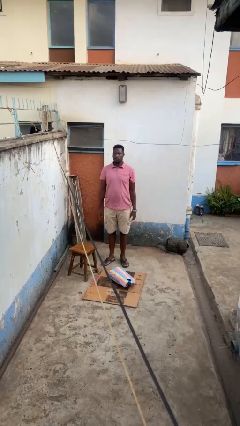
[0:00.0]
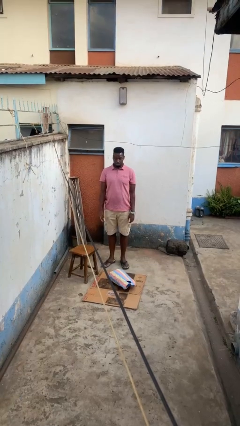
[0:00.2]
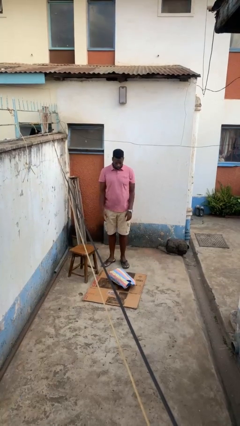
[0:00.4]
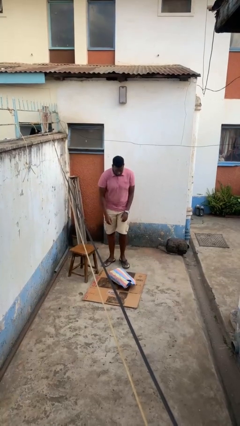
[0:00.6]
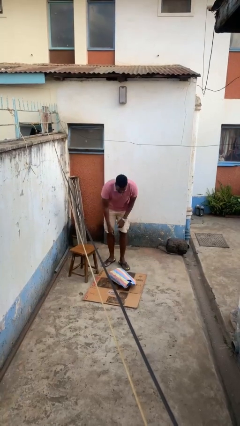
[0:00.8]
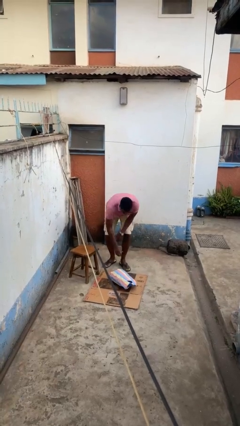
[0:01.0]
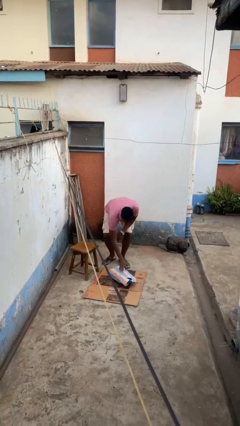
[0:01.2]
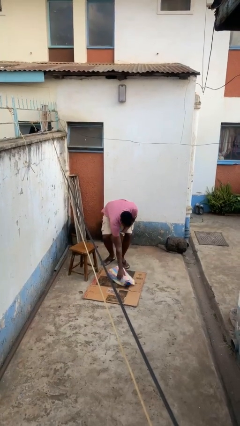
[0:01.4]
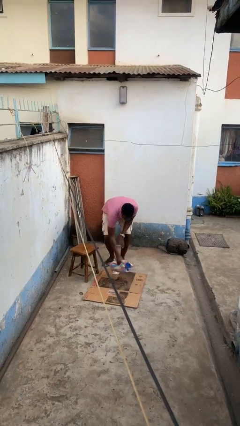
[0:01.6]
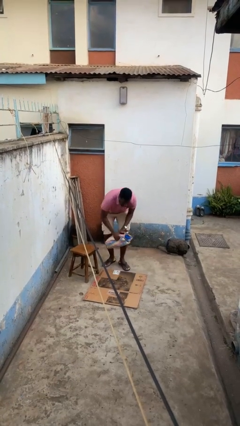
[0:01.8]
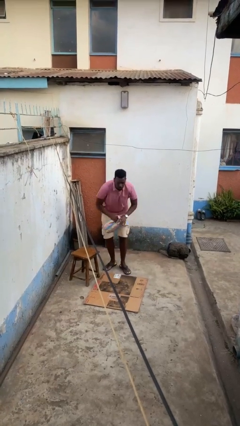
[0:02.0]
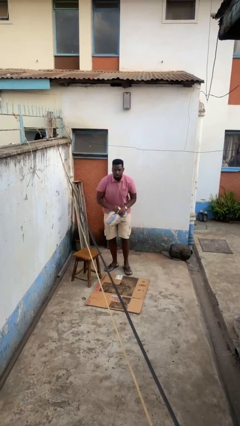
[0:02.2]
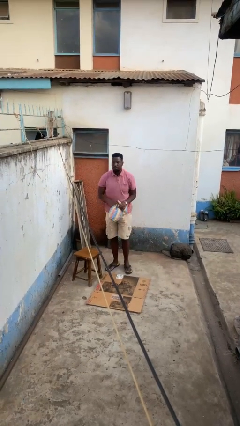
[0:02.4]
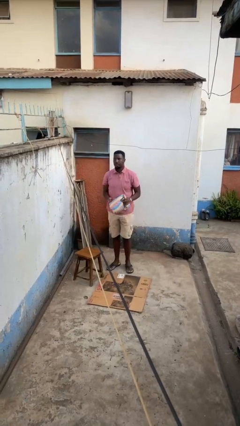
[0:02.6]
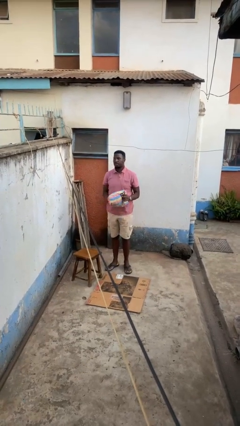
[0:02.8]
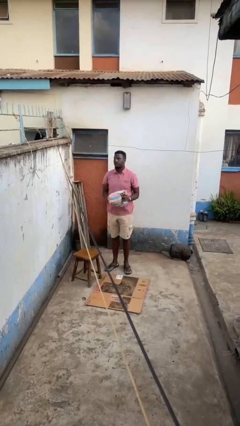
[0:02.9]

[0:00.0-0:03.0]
person picks up object from floor

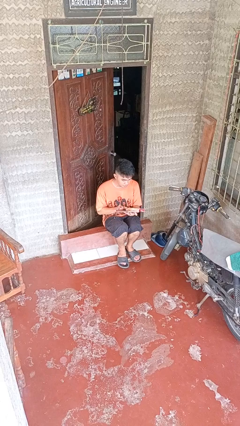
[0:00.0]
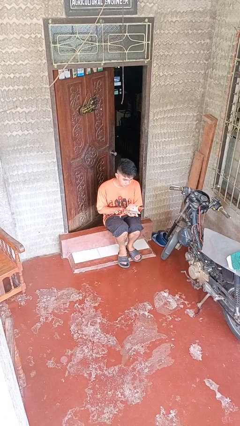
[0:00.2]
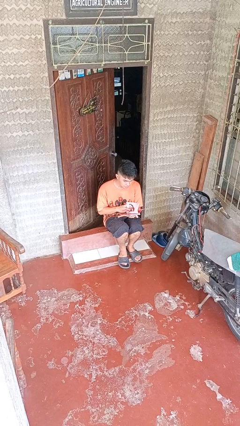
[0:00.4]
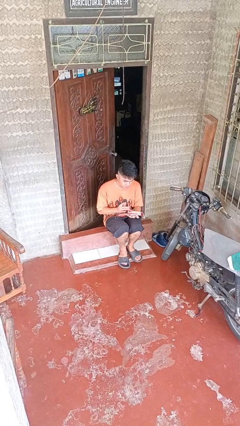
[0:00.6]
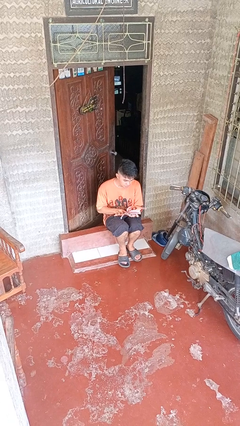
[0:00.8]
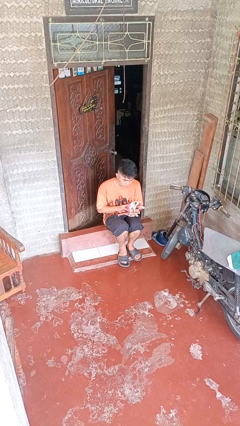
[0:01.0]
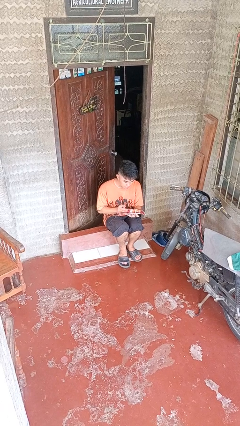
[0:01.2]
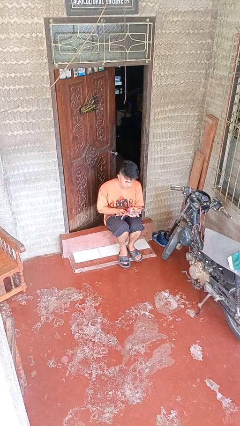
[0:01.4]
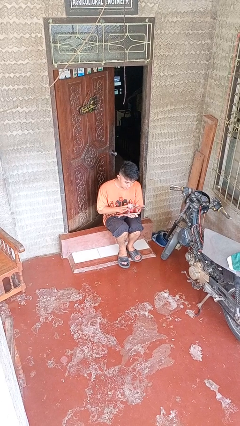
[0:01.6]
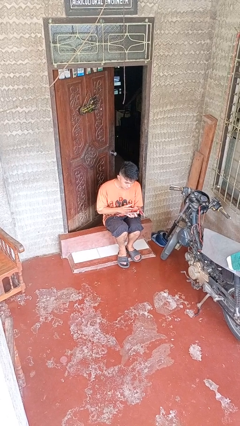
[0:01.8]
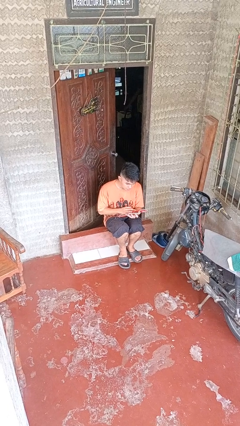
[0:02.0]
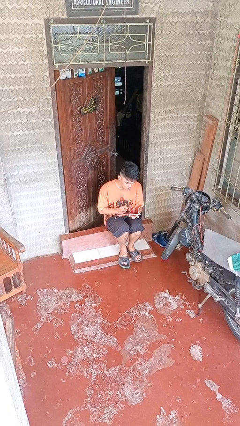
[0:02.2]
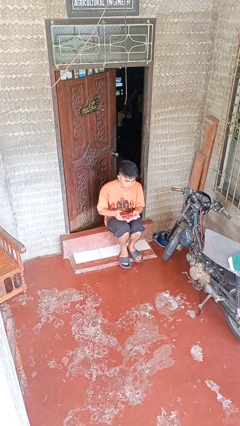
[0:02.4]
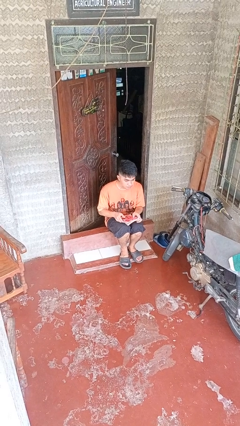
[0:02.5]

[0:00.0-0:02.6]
person reads magazine

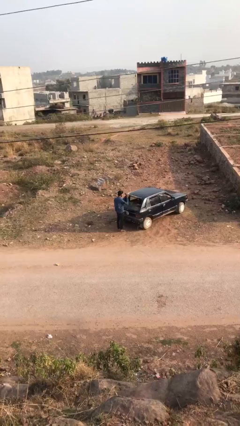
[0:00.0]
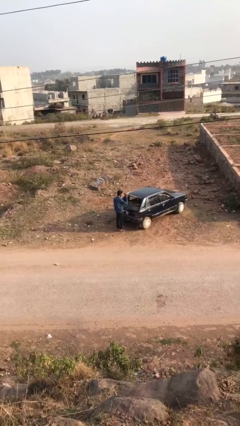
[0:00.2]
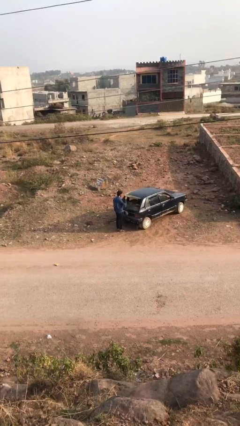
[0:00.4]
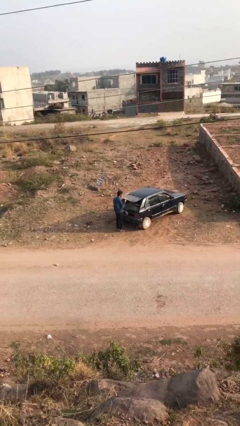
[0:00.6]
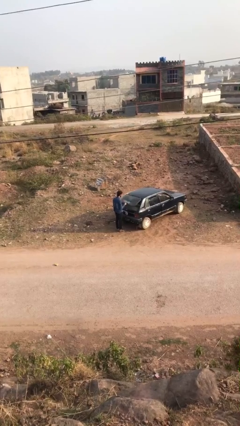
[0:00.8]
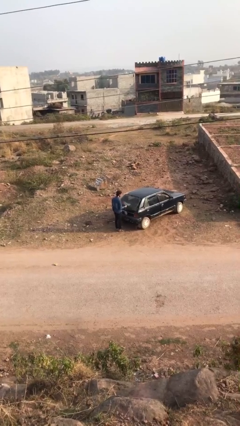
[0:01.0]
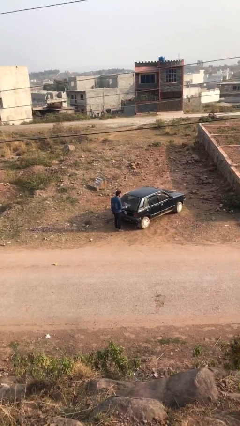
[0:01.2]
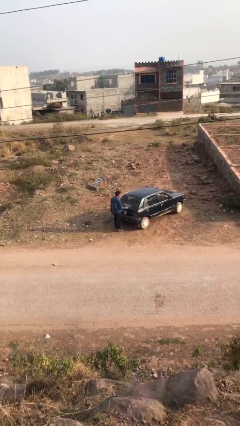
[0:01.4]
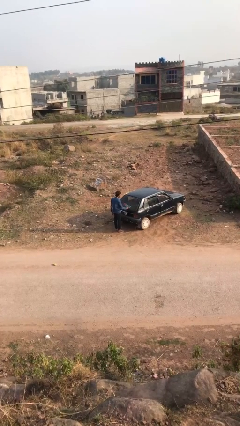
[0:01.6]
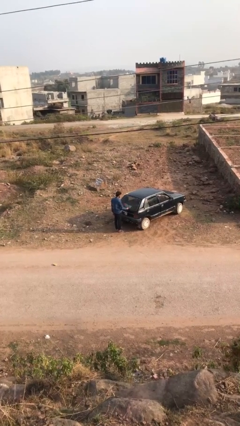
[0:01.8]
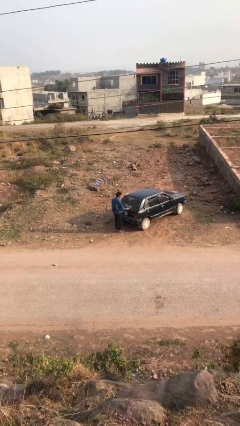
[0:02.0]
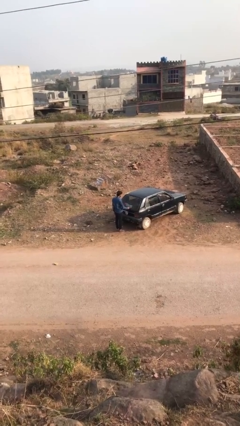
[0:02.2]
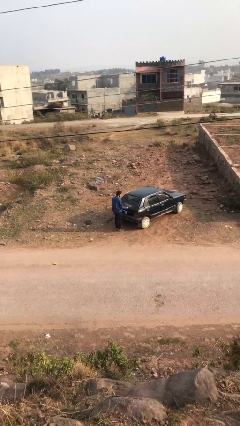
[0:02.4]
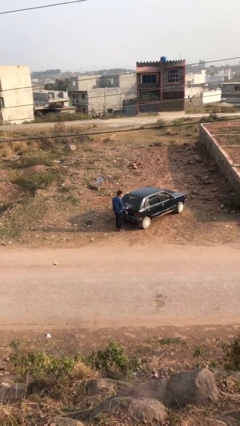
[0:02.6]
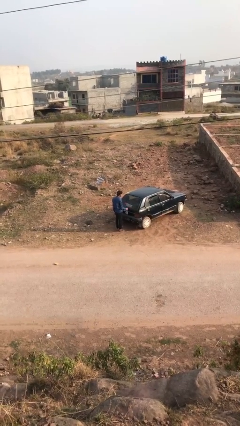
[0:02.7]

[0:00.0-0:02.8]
person closes car trunk

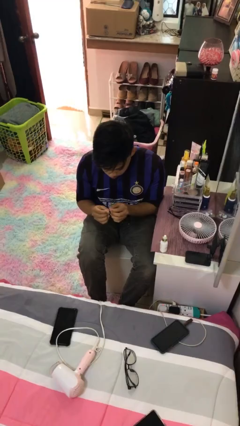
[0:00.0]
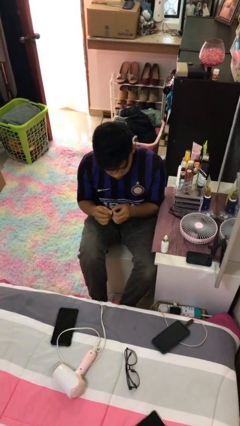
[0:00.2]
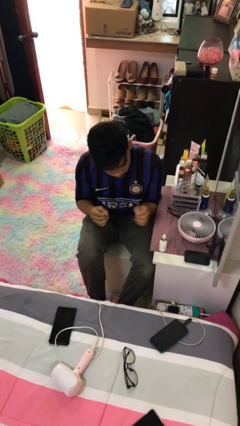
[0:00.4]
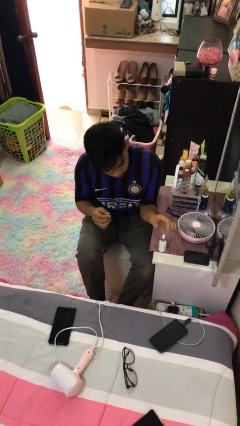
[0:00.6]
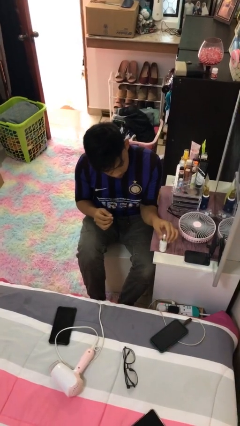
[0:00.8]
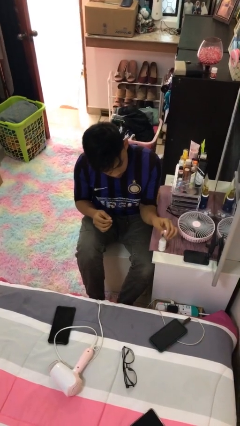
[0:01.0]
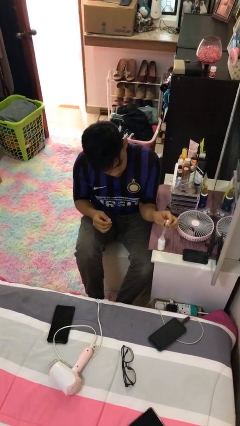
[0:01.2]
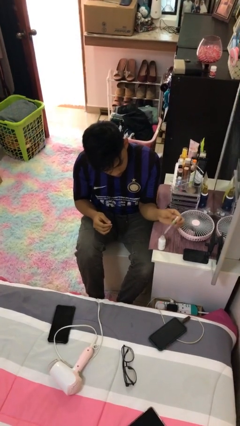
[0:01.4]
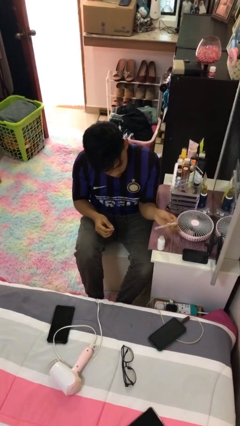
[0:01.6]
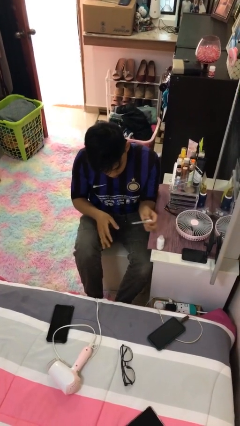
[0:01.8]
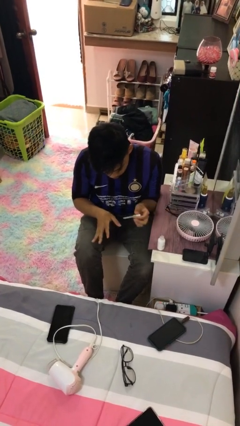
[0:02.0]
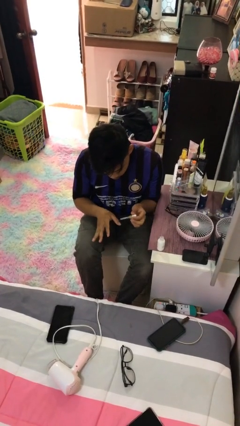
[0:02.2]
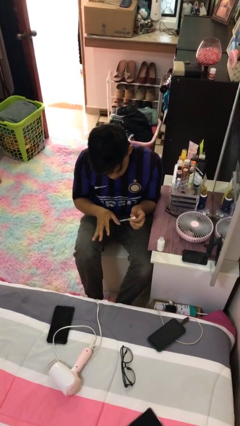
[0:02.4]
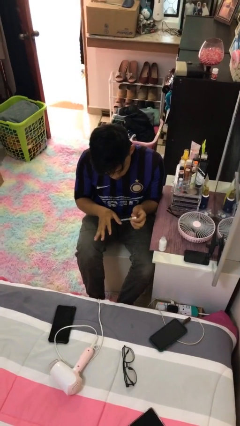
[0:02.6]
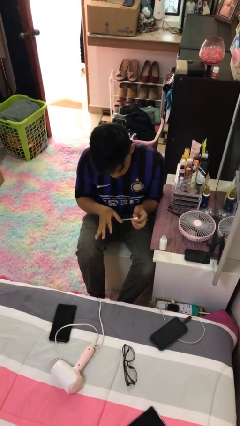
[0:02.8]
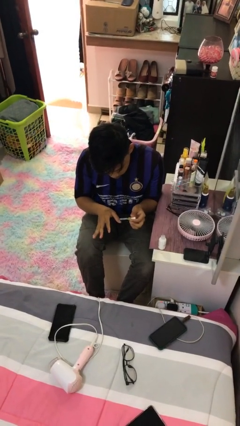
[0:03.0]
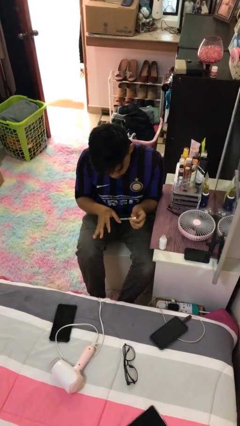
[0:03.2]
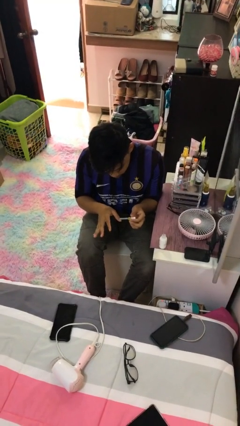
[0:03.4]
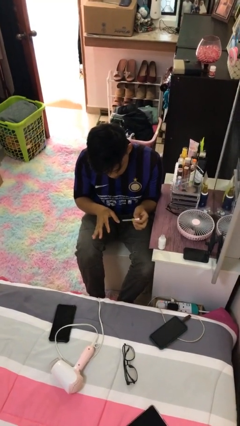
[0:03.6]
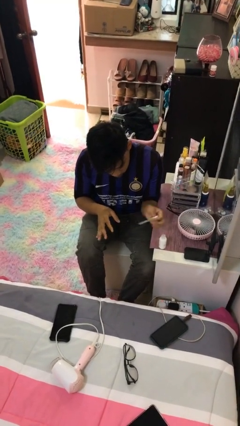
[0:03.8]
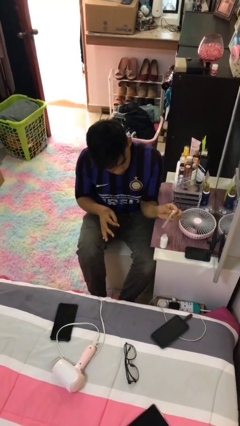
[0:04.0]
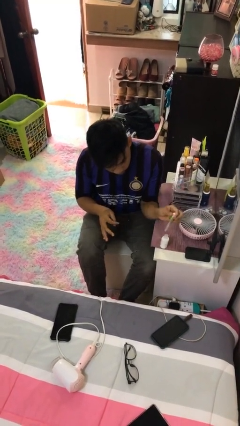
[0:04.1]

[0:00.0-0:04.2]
person paints fingernails

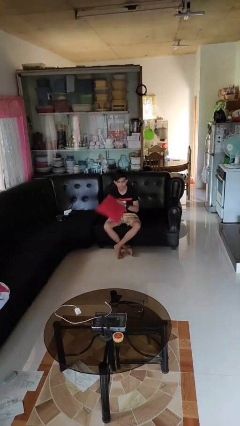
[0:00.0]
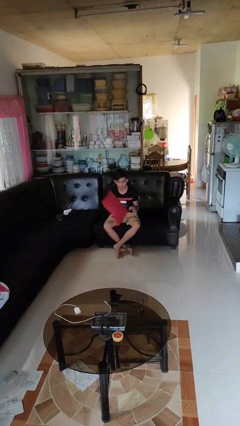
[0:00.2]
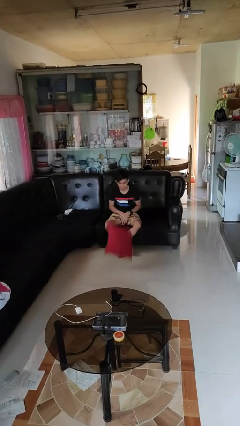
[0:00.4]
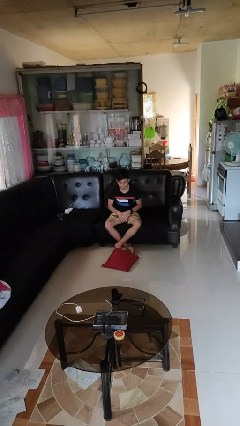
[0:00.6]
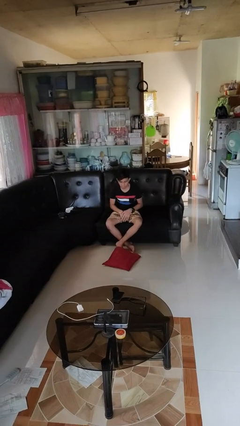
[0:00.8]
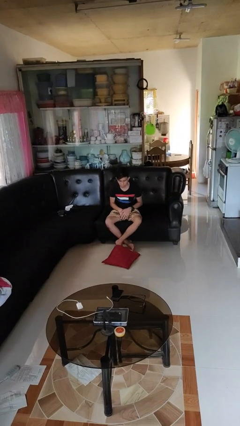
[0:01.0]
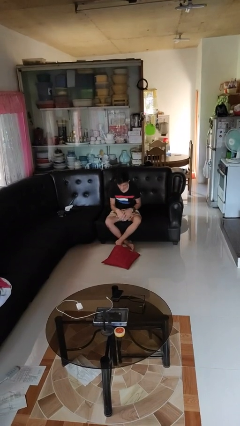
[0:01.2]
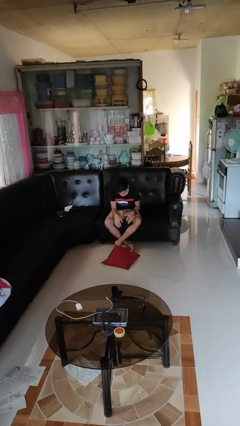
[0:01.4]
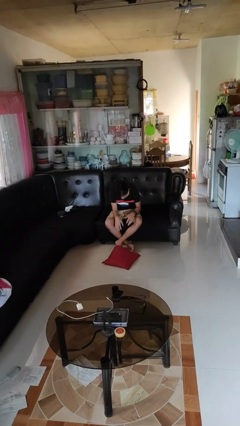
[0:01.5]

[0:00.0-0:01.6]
person drops object

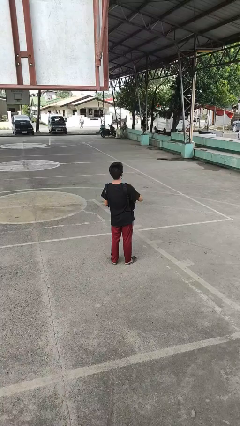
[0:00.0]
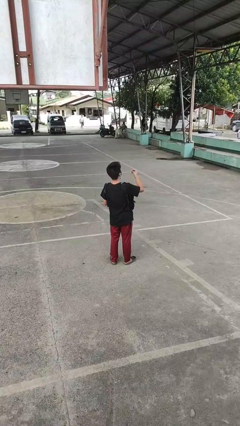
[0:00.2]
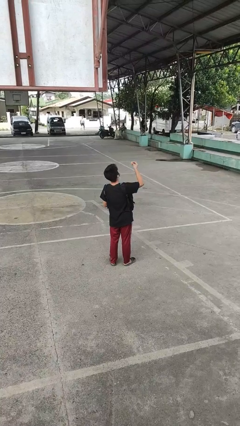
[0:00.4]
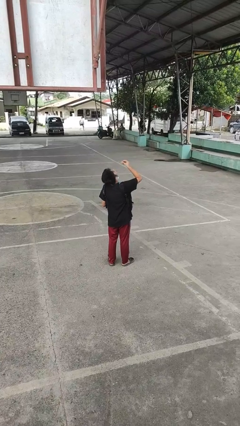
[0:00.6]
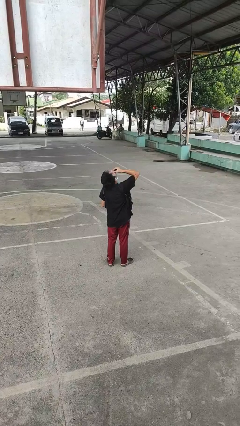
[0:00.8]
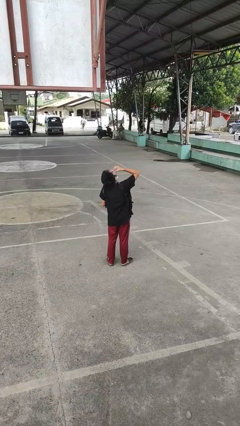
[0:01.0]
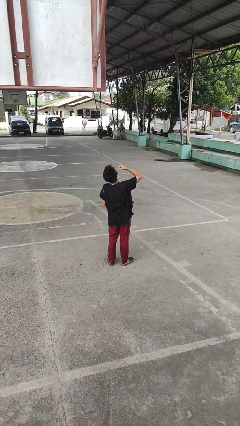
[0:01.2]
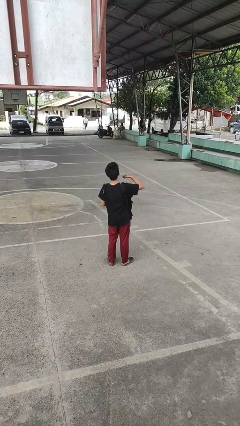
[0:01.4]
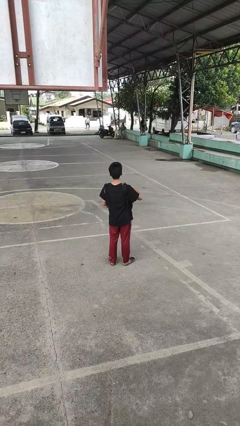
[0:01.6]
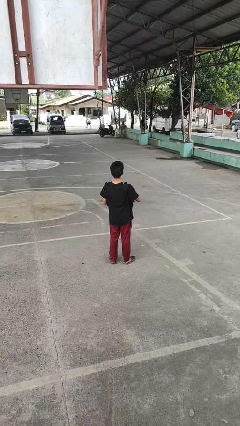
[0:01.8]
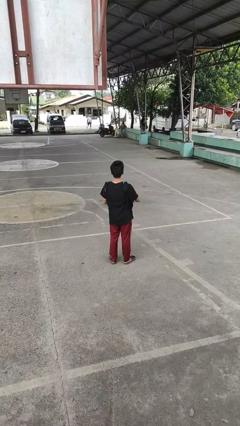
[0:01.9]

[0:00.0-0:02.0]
person eats snack from bag

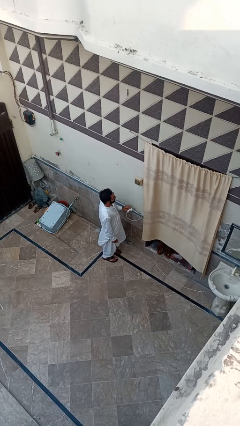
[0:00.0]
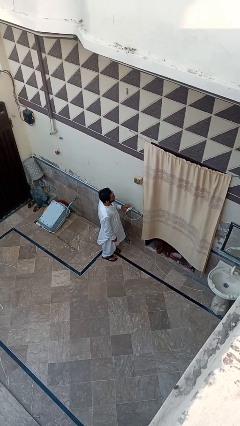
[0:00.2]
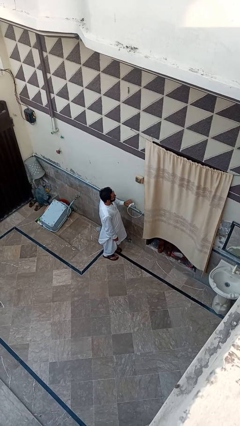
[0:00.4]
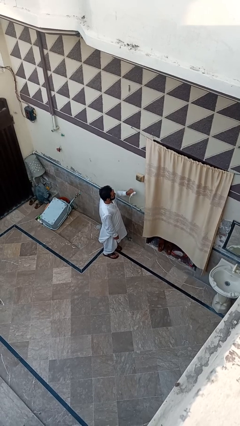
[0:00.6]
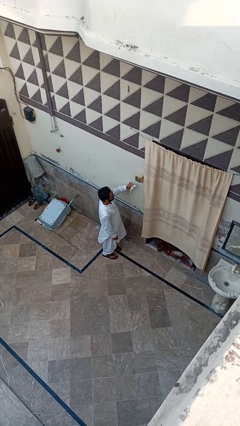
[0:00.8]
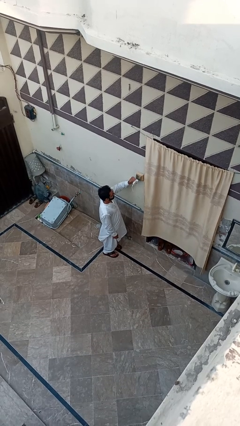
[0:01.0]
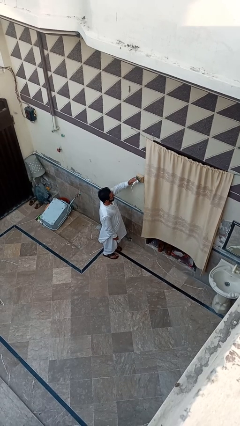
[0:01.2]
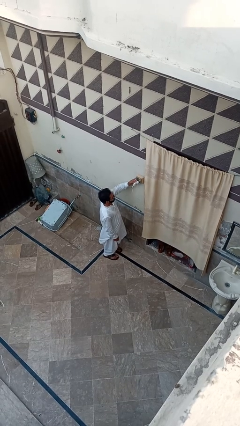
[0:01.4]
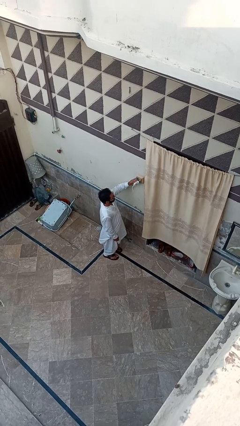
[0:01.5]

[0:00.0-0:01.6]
person plugs into electrical socket
